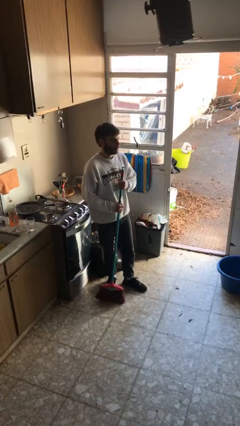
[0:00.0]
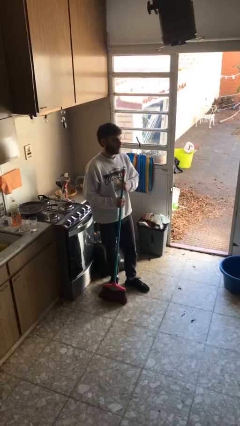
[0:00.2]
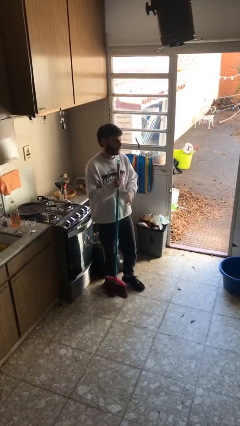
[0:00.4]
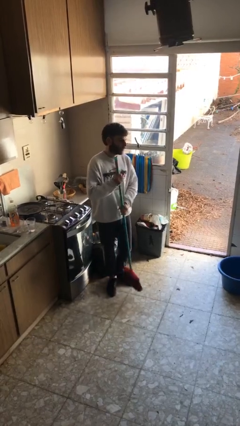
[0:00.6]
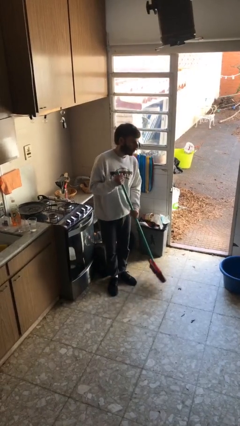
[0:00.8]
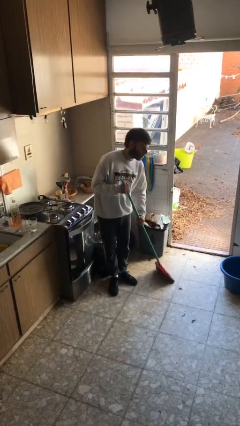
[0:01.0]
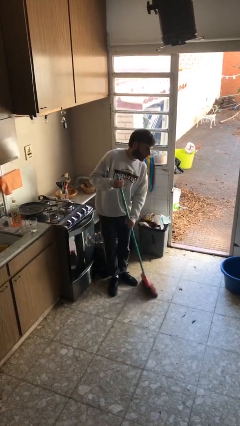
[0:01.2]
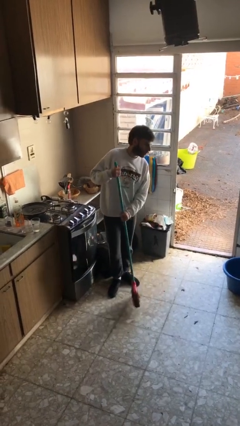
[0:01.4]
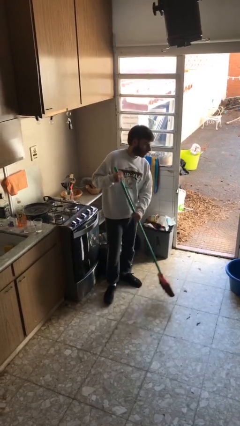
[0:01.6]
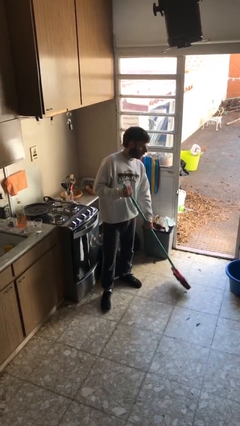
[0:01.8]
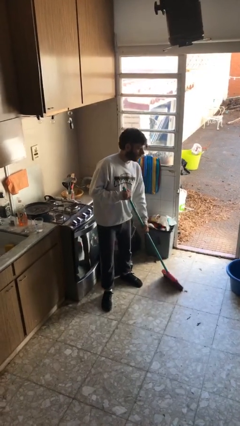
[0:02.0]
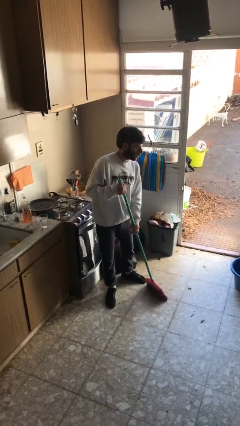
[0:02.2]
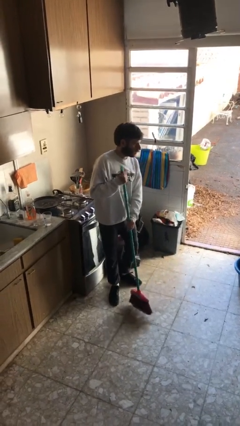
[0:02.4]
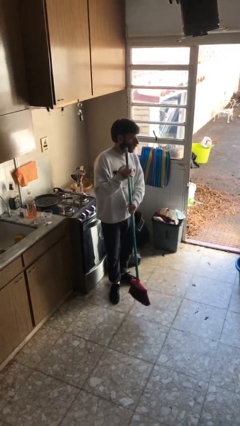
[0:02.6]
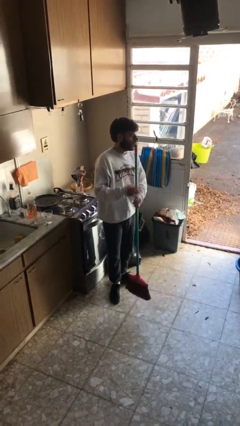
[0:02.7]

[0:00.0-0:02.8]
person sweeps floor

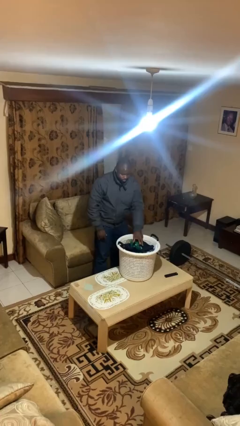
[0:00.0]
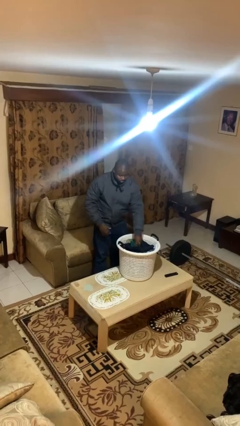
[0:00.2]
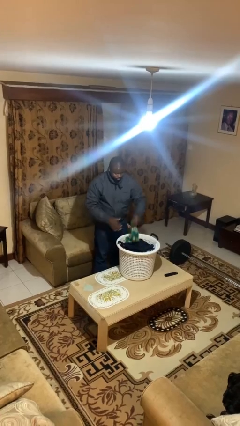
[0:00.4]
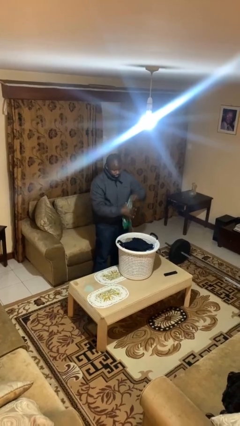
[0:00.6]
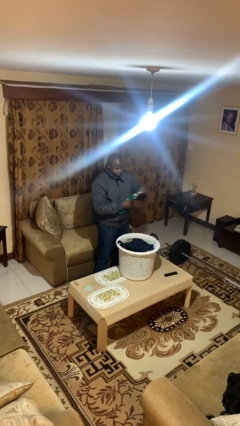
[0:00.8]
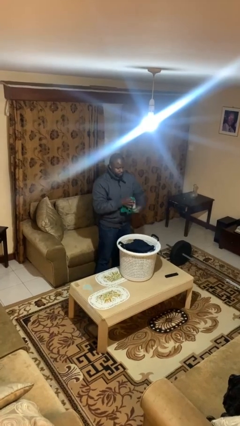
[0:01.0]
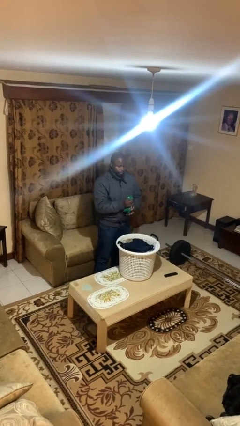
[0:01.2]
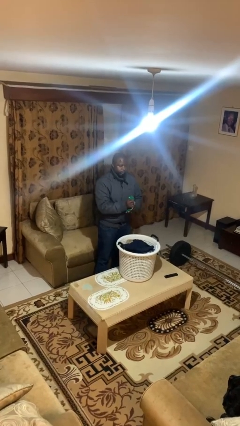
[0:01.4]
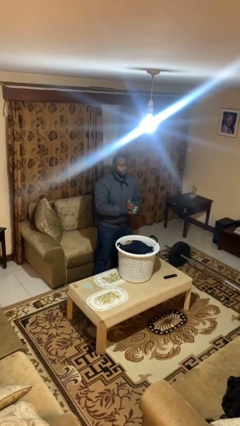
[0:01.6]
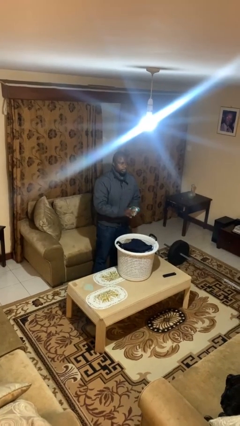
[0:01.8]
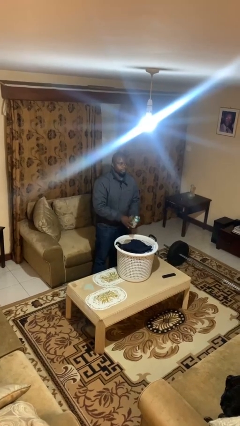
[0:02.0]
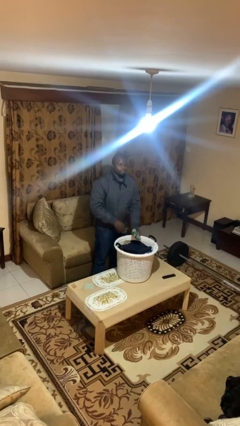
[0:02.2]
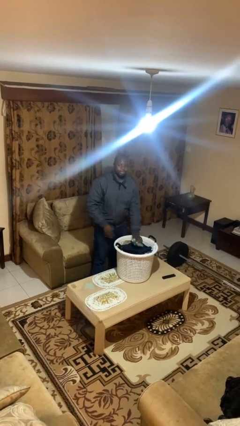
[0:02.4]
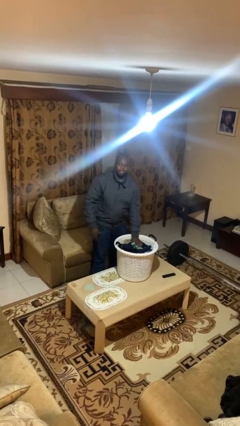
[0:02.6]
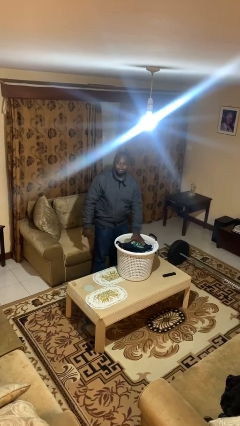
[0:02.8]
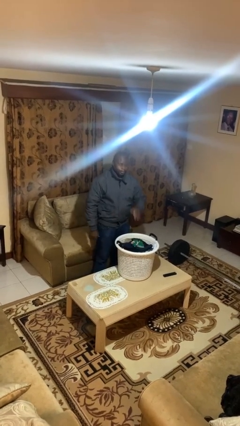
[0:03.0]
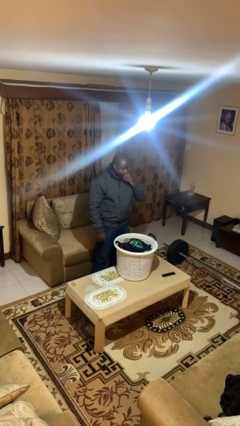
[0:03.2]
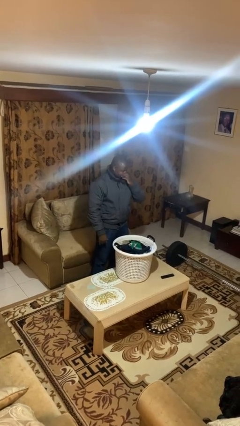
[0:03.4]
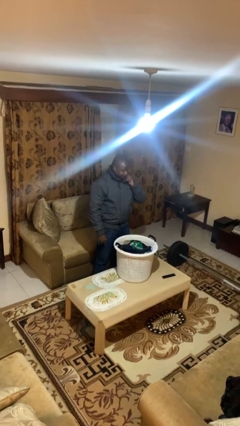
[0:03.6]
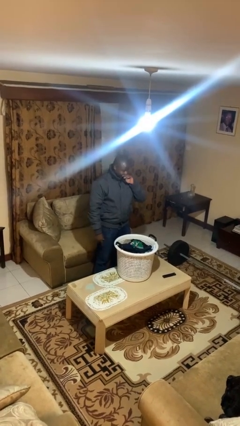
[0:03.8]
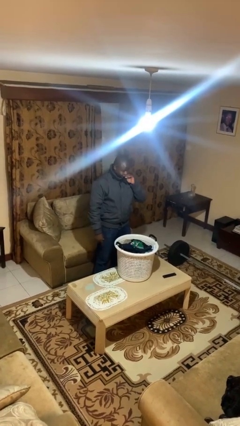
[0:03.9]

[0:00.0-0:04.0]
person folds socks

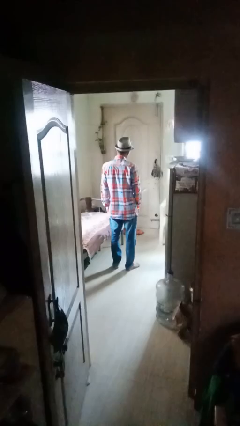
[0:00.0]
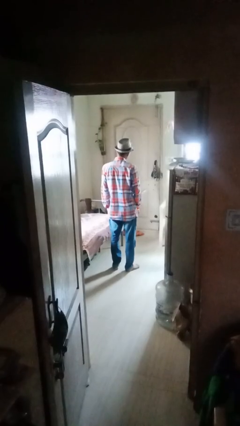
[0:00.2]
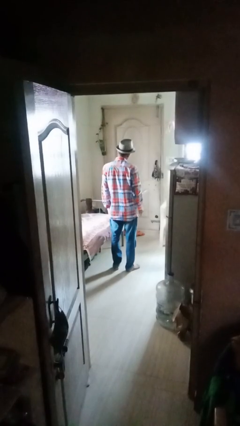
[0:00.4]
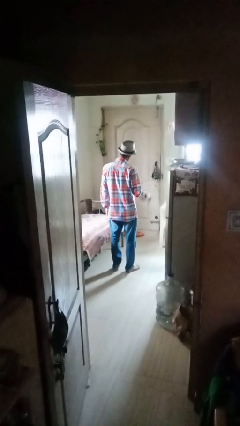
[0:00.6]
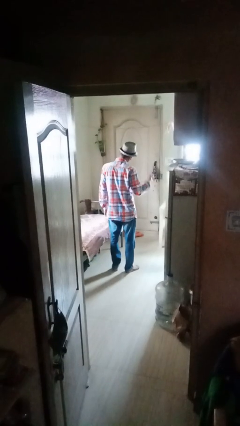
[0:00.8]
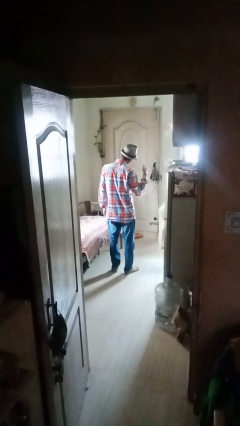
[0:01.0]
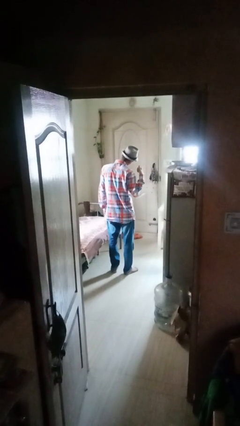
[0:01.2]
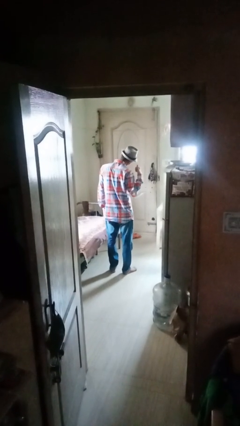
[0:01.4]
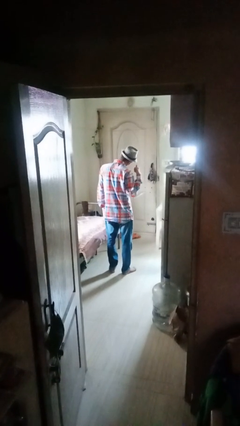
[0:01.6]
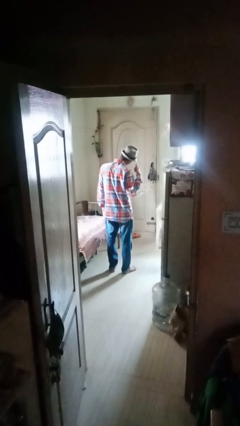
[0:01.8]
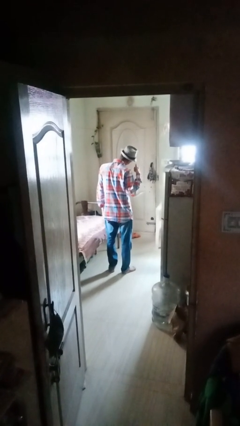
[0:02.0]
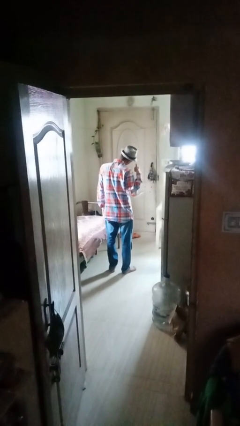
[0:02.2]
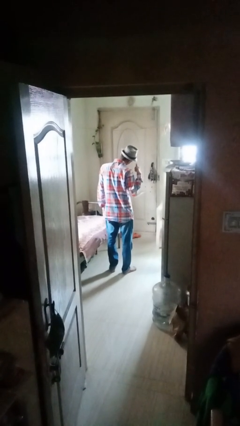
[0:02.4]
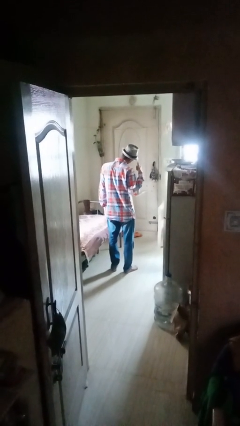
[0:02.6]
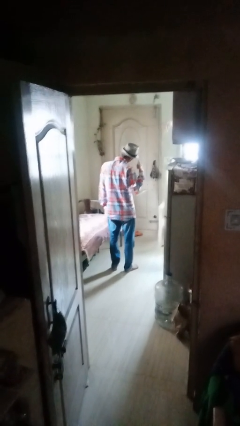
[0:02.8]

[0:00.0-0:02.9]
person gestures call me

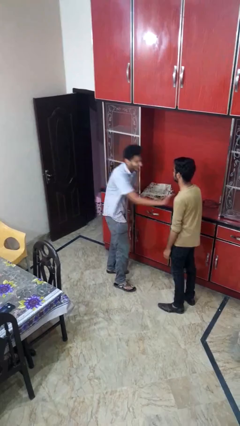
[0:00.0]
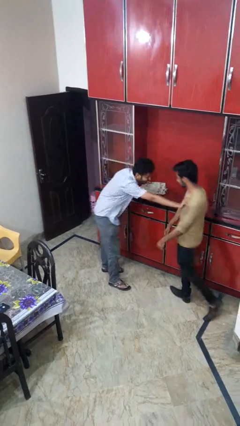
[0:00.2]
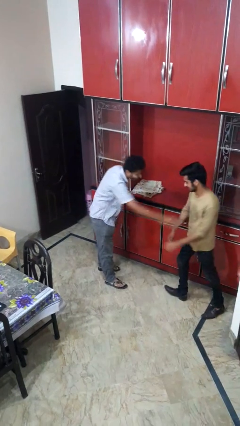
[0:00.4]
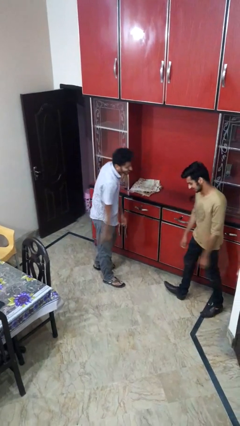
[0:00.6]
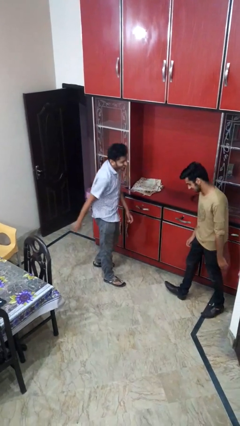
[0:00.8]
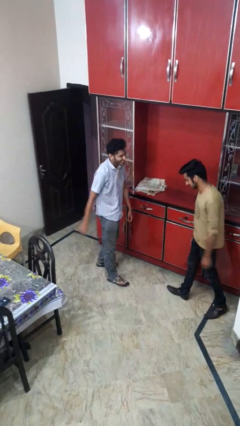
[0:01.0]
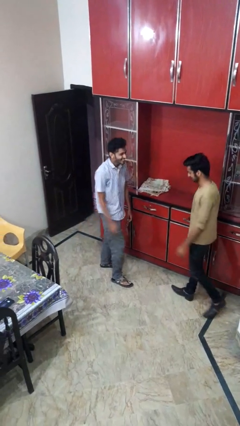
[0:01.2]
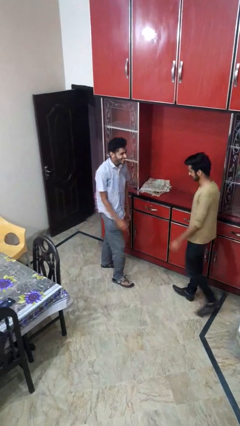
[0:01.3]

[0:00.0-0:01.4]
person shoves person

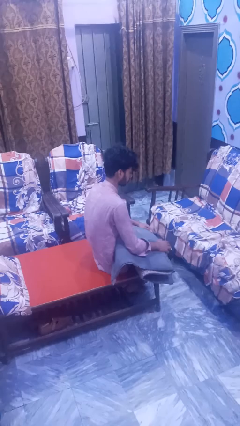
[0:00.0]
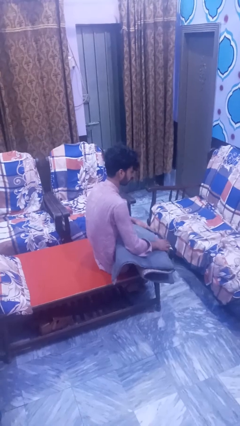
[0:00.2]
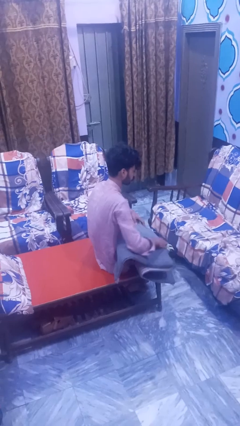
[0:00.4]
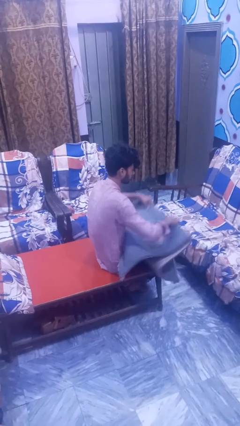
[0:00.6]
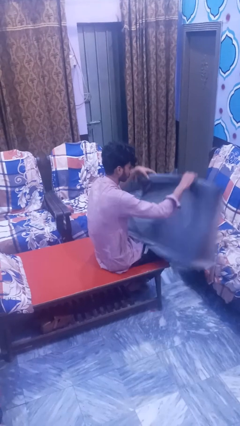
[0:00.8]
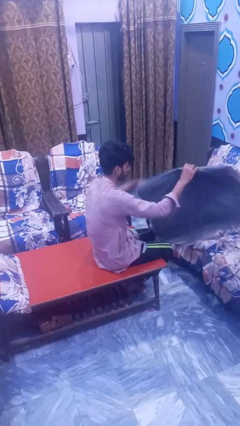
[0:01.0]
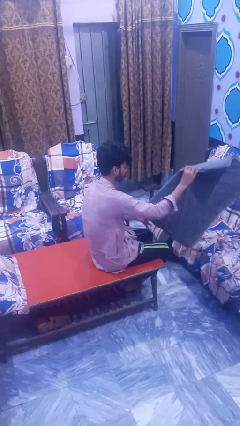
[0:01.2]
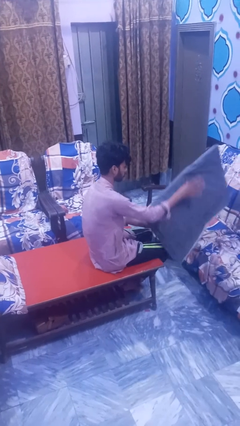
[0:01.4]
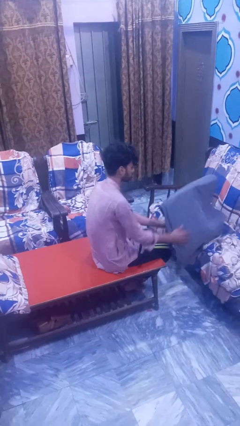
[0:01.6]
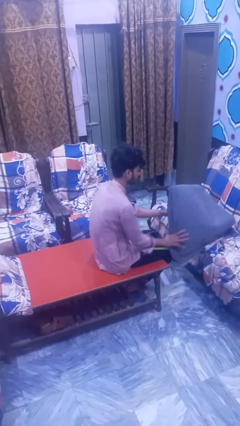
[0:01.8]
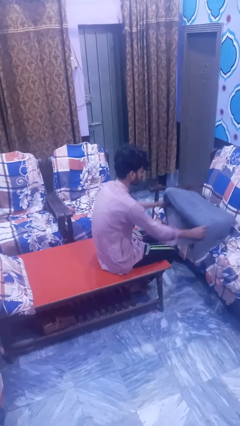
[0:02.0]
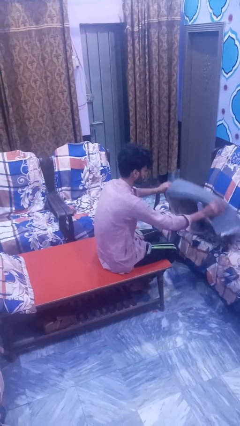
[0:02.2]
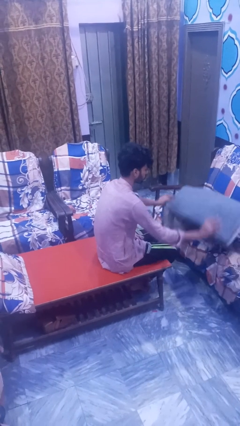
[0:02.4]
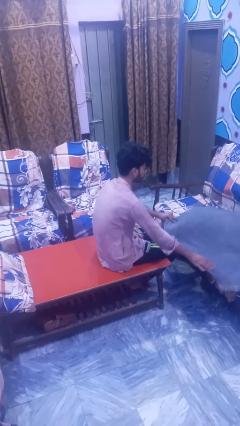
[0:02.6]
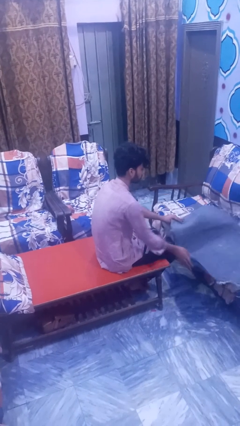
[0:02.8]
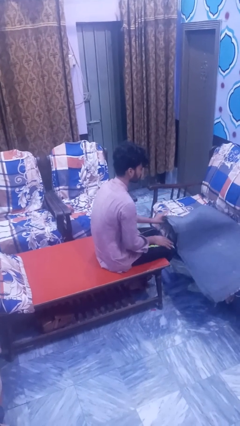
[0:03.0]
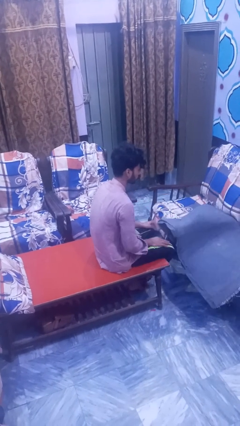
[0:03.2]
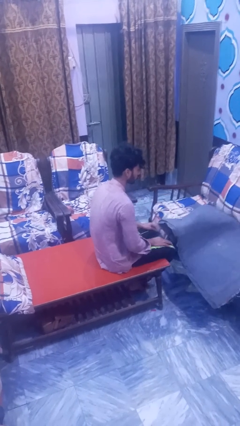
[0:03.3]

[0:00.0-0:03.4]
person unfolds blanket

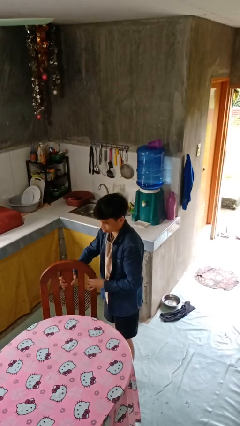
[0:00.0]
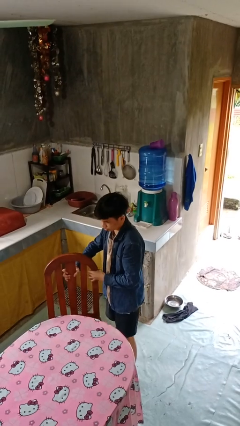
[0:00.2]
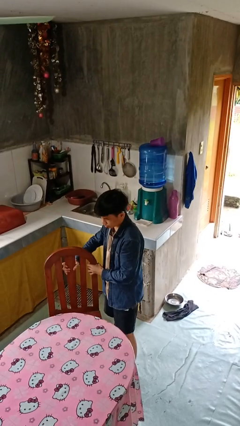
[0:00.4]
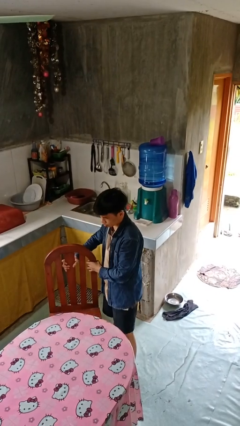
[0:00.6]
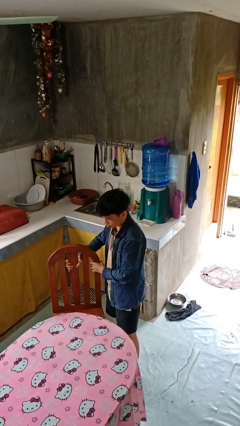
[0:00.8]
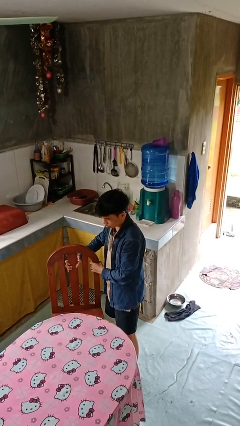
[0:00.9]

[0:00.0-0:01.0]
person pulls out chair

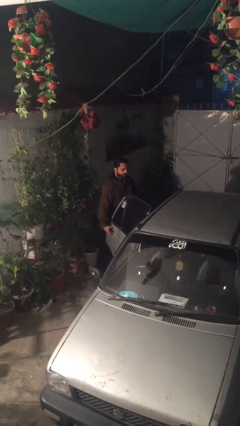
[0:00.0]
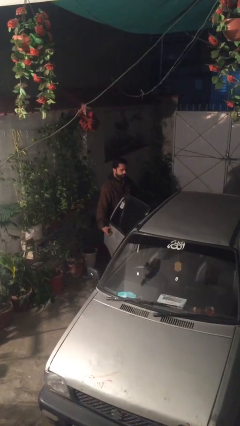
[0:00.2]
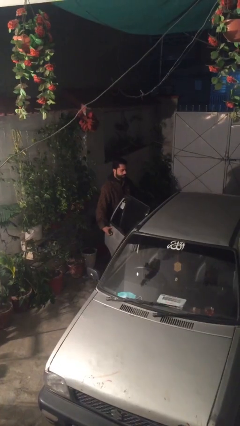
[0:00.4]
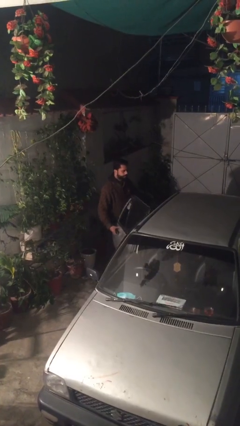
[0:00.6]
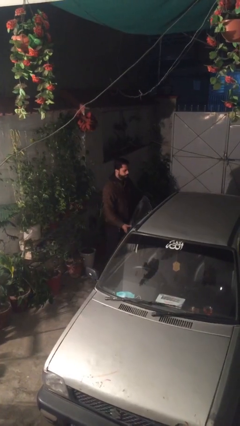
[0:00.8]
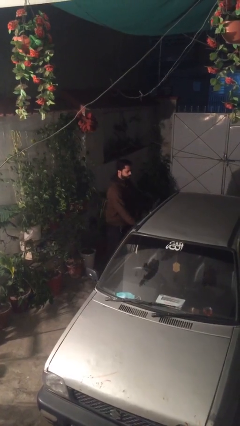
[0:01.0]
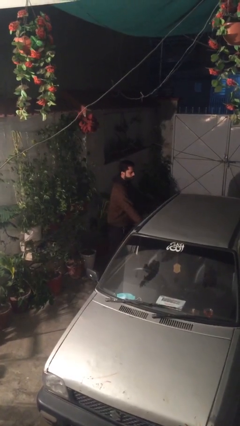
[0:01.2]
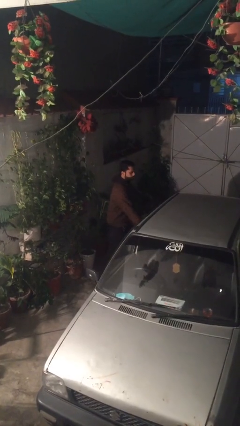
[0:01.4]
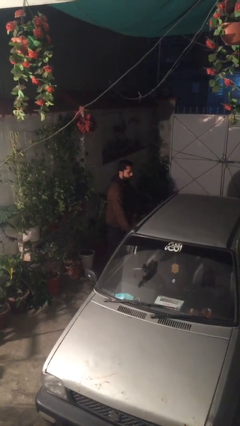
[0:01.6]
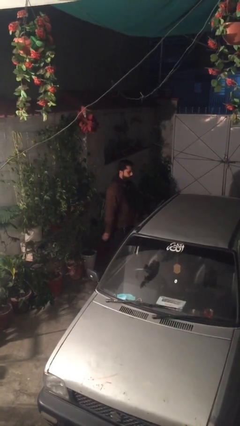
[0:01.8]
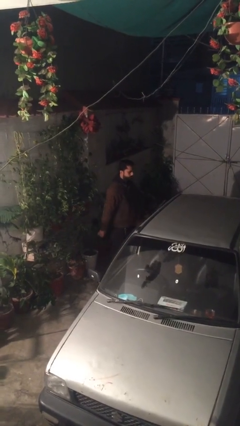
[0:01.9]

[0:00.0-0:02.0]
person closes car door
